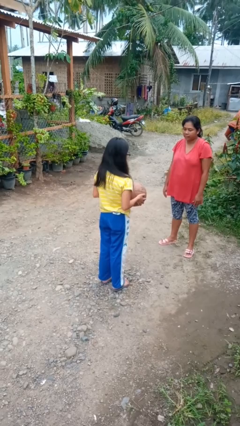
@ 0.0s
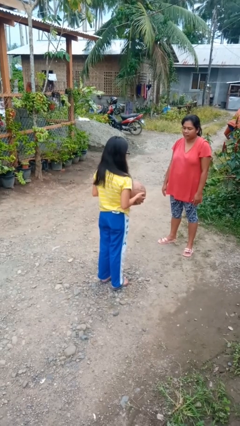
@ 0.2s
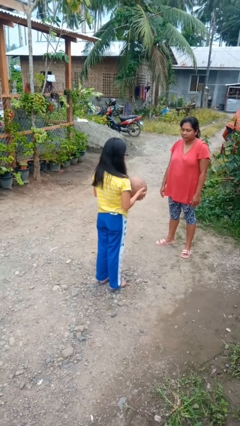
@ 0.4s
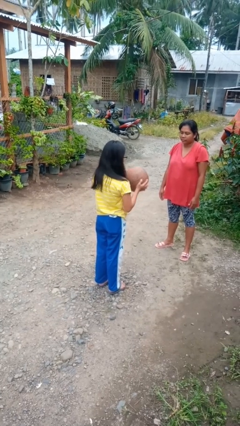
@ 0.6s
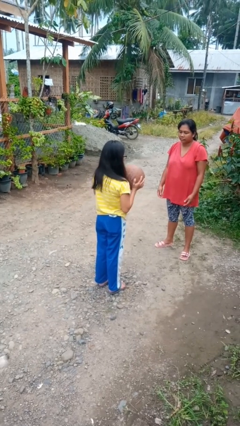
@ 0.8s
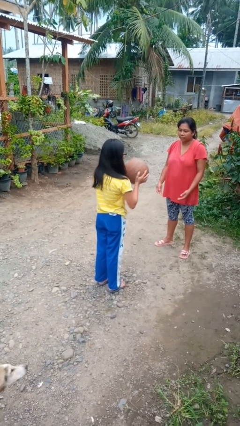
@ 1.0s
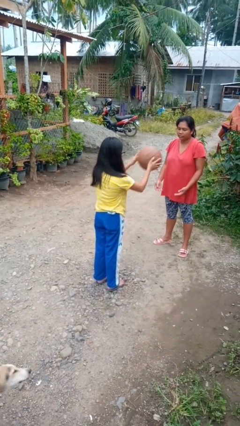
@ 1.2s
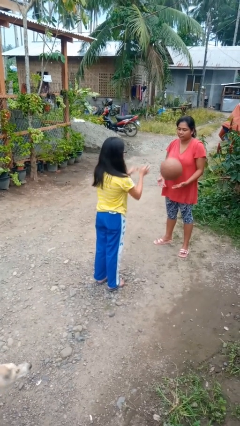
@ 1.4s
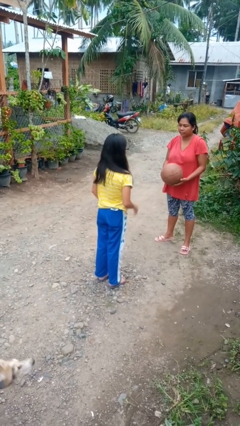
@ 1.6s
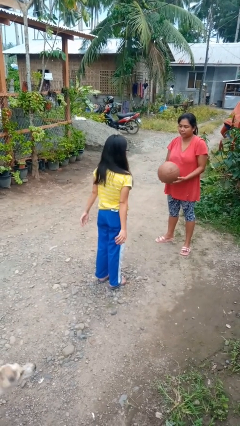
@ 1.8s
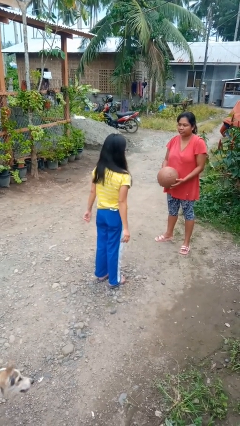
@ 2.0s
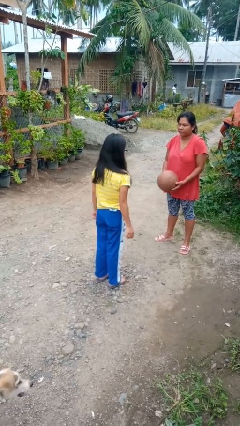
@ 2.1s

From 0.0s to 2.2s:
person throws object to person

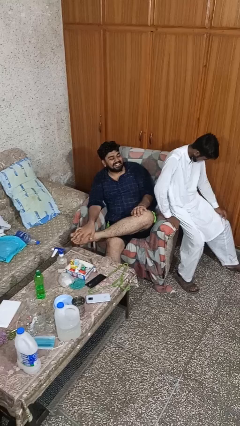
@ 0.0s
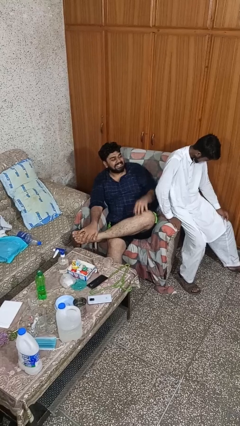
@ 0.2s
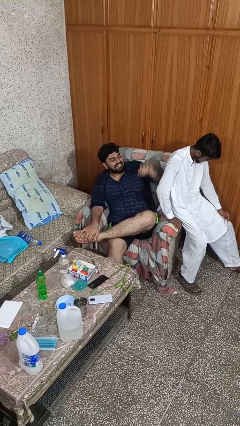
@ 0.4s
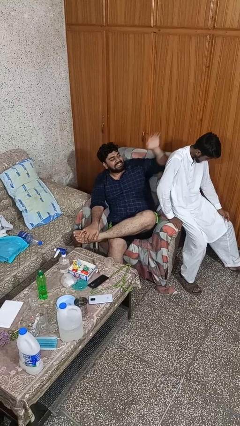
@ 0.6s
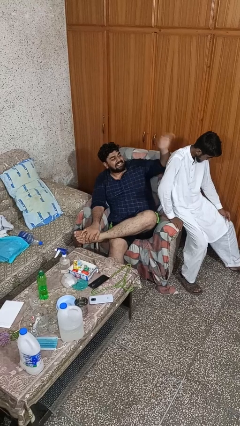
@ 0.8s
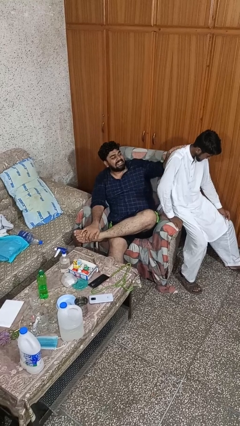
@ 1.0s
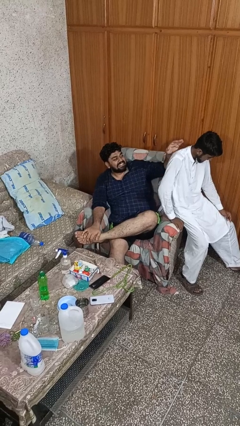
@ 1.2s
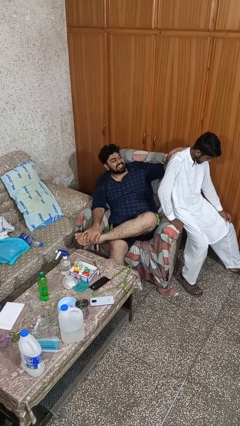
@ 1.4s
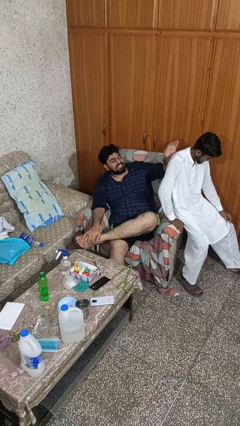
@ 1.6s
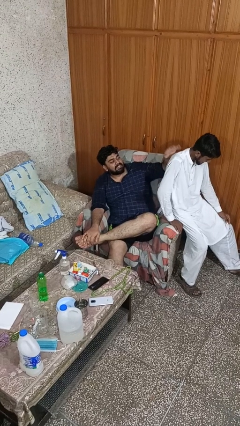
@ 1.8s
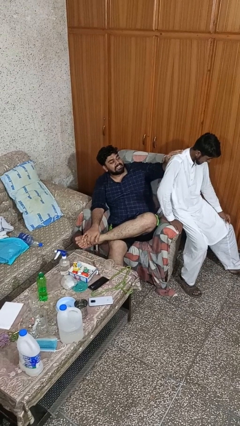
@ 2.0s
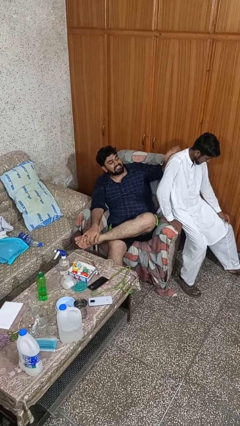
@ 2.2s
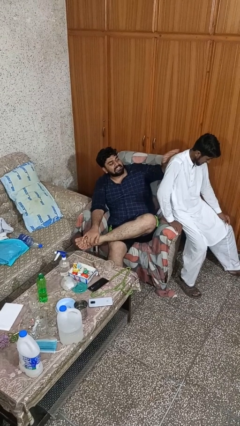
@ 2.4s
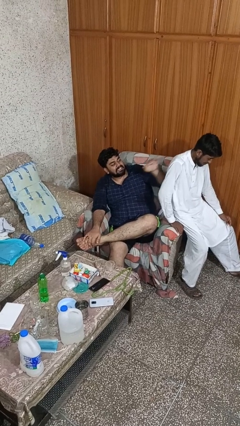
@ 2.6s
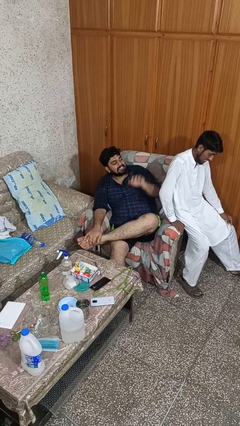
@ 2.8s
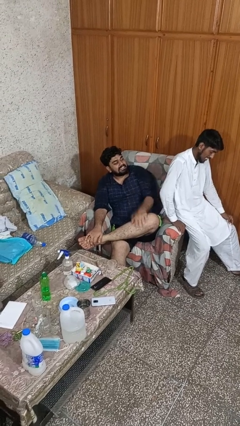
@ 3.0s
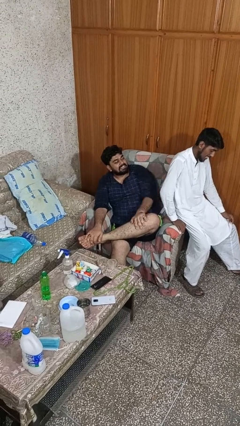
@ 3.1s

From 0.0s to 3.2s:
person pounds shoulders of person

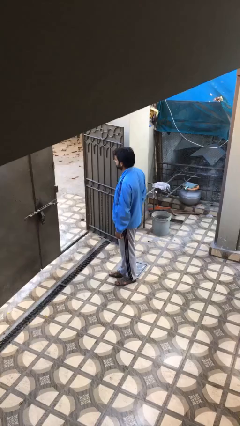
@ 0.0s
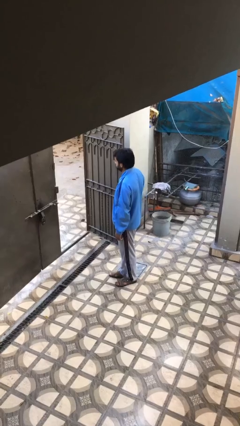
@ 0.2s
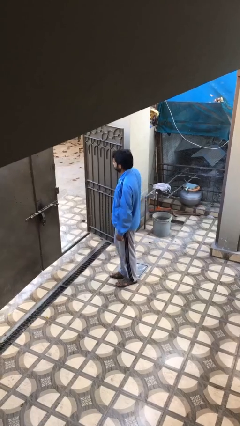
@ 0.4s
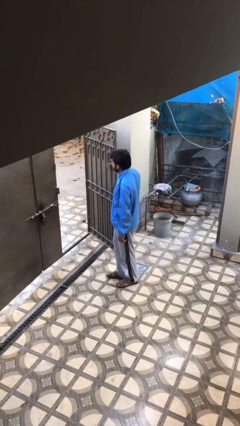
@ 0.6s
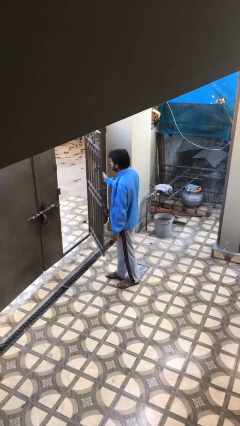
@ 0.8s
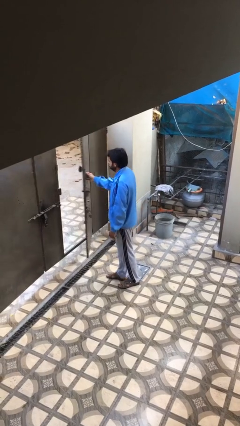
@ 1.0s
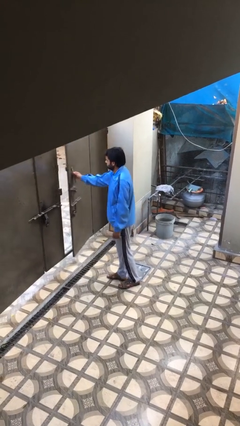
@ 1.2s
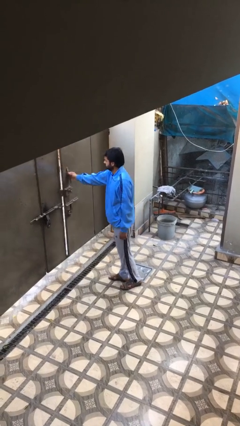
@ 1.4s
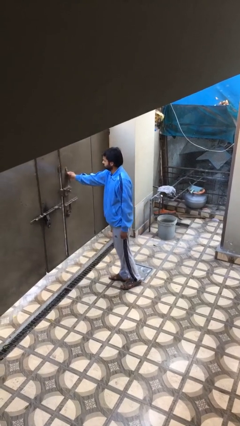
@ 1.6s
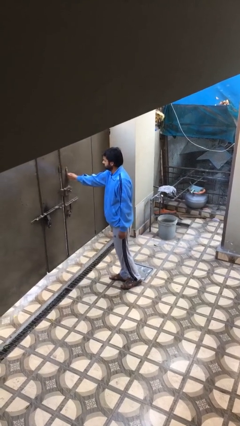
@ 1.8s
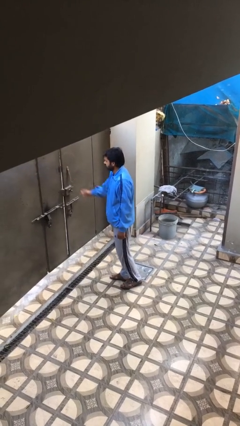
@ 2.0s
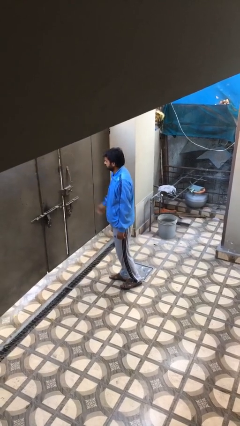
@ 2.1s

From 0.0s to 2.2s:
person closes facility door

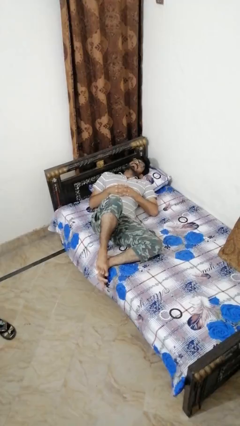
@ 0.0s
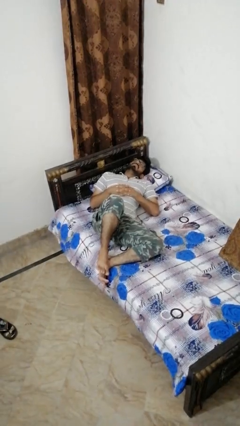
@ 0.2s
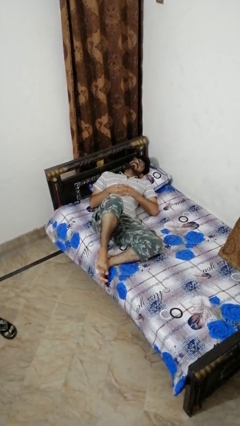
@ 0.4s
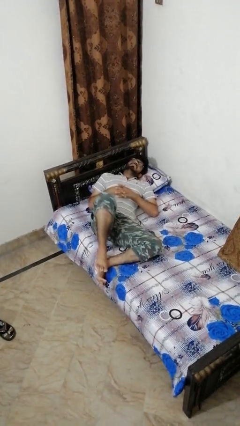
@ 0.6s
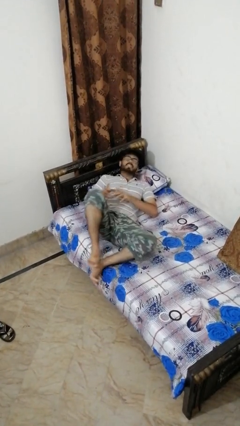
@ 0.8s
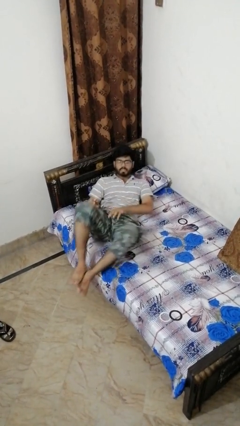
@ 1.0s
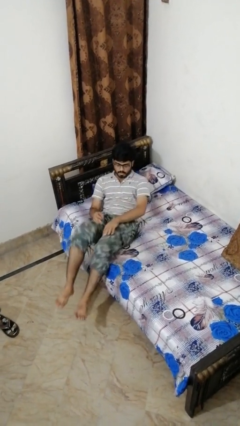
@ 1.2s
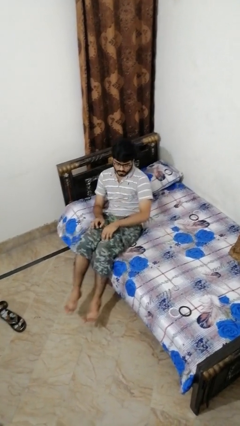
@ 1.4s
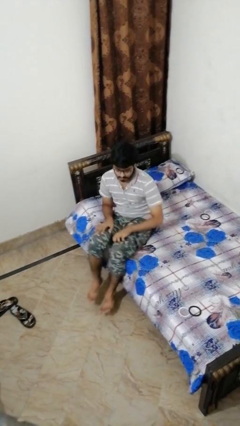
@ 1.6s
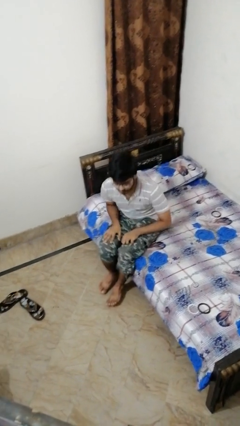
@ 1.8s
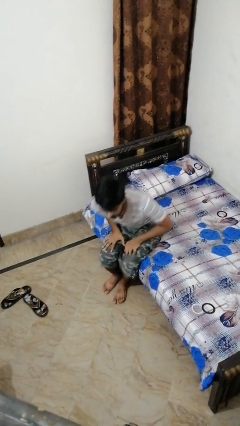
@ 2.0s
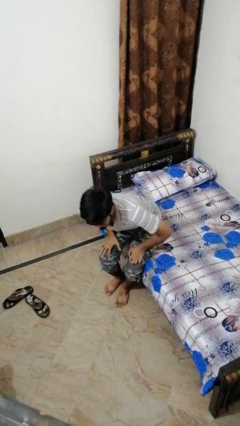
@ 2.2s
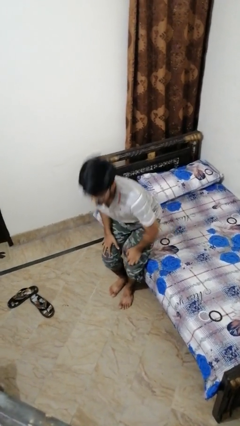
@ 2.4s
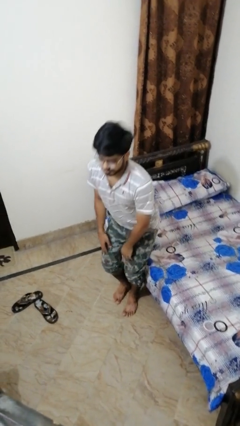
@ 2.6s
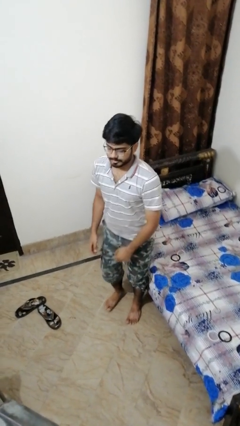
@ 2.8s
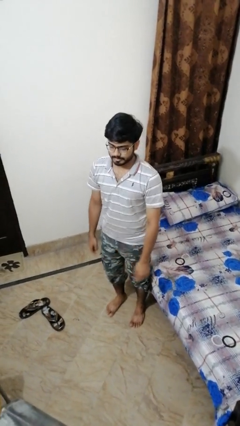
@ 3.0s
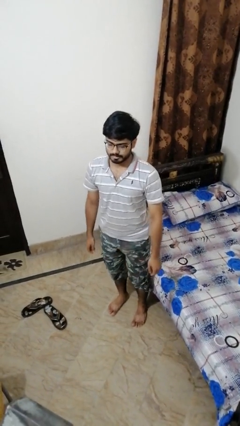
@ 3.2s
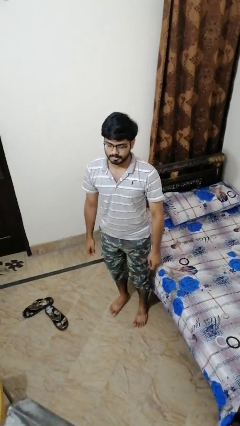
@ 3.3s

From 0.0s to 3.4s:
person stands up

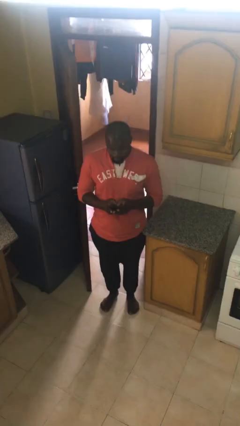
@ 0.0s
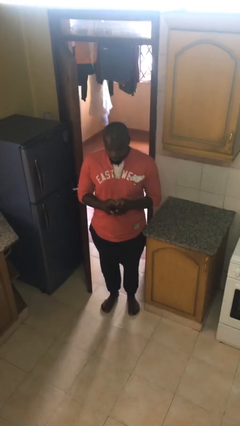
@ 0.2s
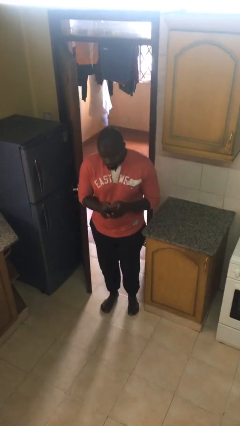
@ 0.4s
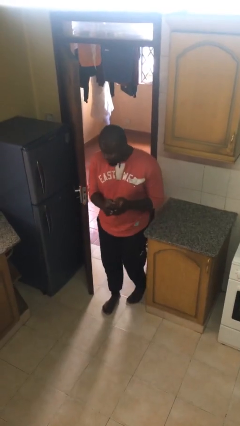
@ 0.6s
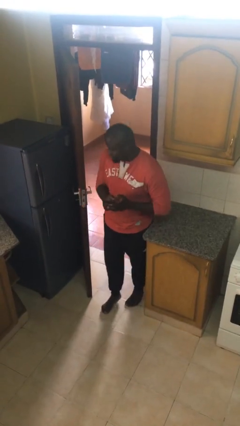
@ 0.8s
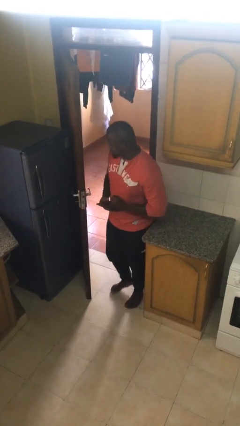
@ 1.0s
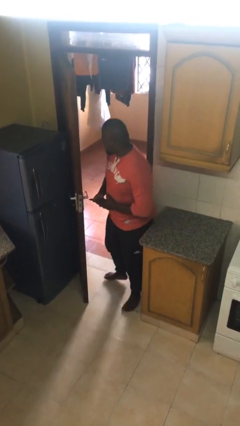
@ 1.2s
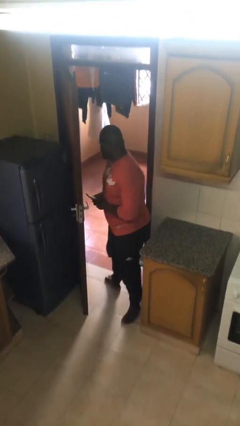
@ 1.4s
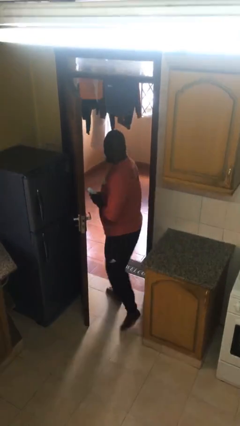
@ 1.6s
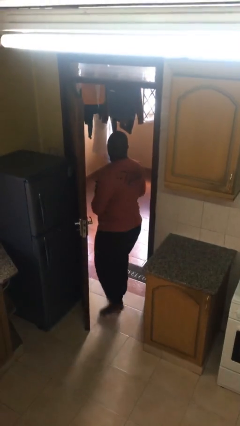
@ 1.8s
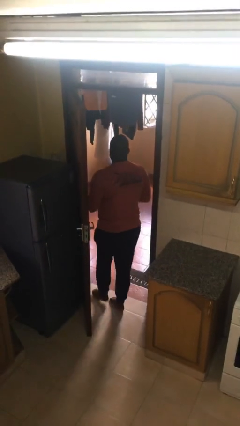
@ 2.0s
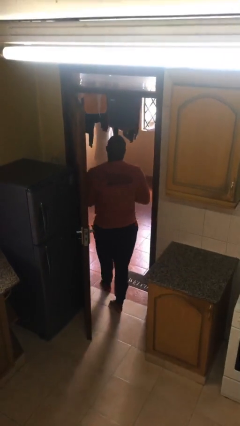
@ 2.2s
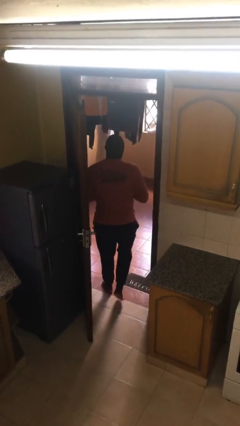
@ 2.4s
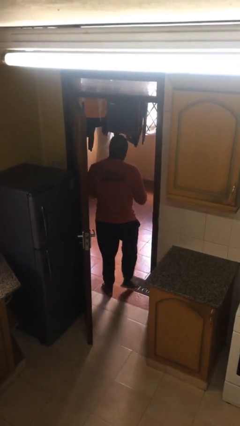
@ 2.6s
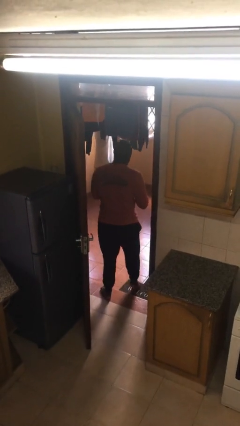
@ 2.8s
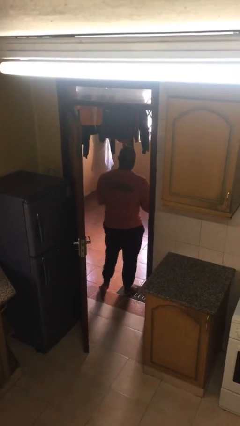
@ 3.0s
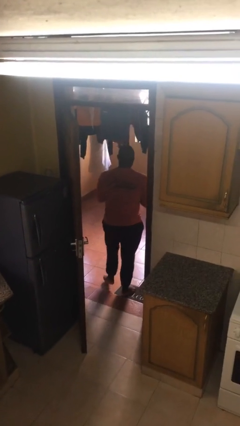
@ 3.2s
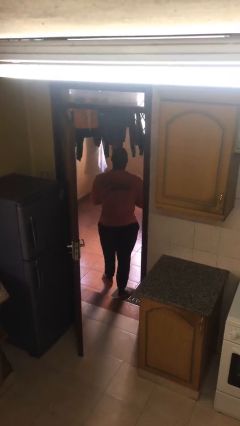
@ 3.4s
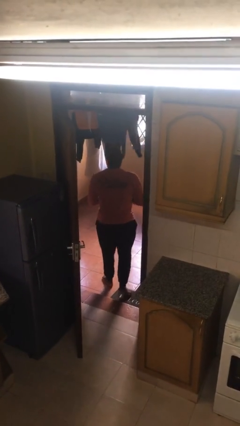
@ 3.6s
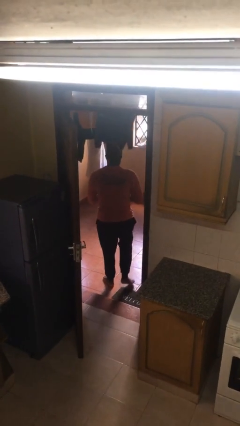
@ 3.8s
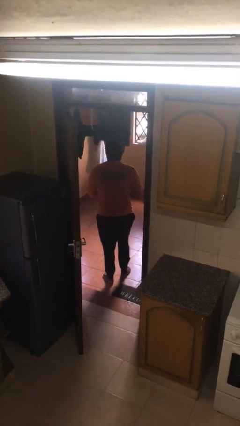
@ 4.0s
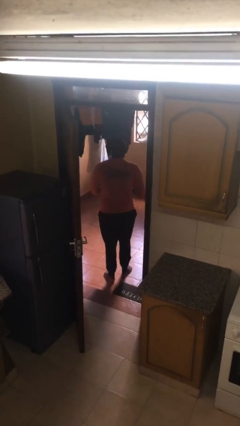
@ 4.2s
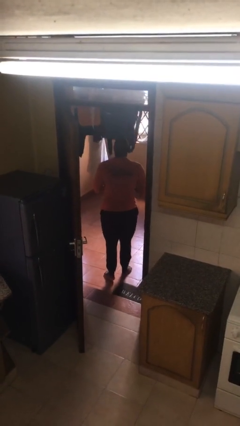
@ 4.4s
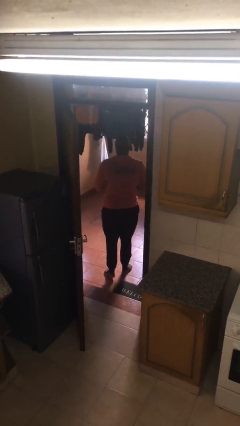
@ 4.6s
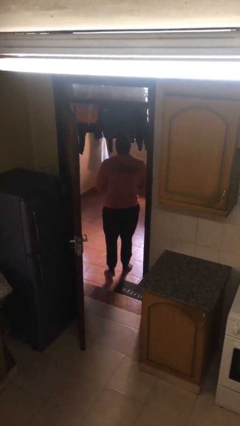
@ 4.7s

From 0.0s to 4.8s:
person exits scene through structure

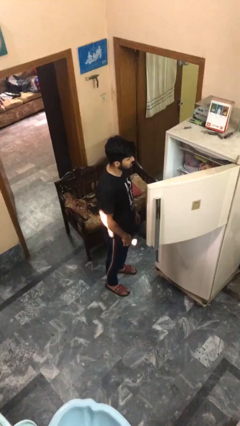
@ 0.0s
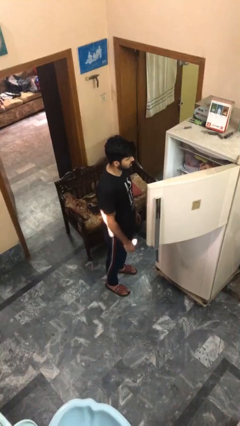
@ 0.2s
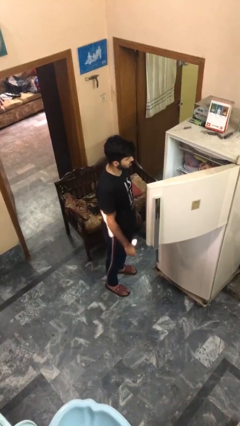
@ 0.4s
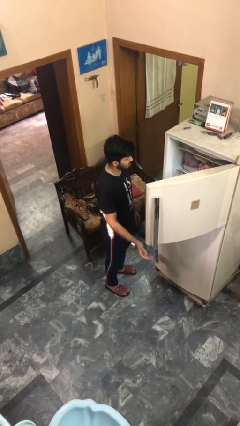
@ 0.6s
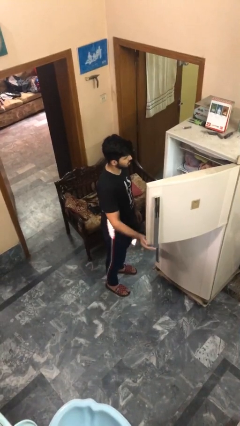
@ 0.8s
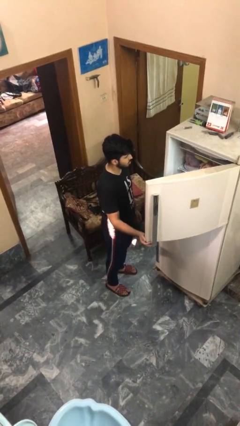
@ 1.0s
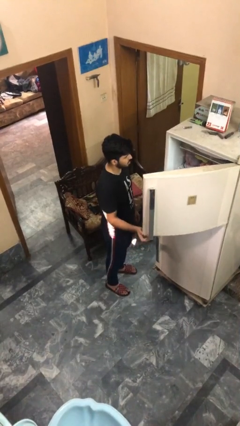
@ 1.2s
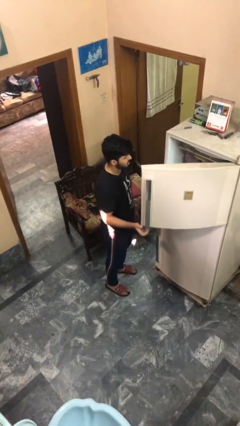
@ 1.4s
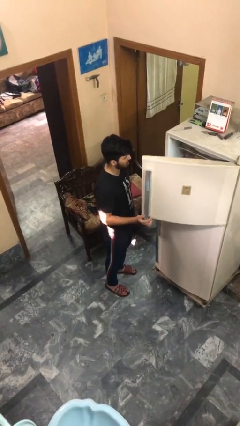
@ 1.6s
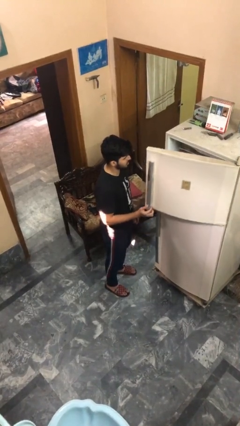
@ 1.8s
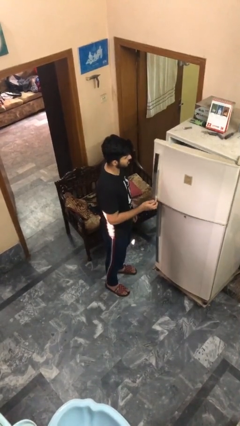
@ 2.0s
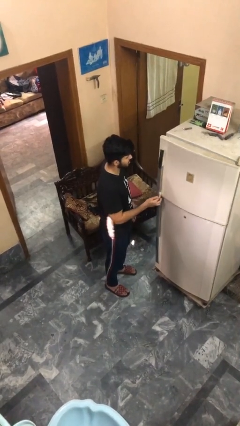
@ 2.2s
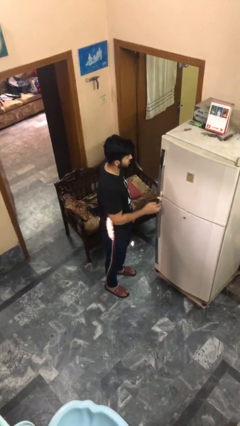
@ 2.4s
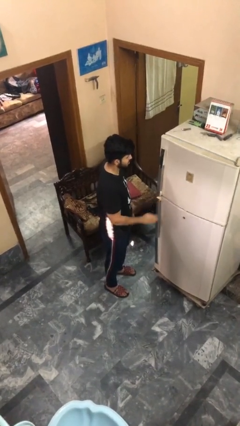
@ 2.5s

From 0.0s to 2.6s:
person closes refrigerator
